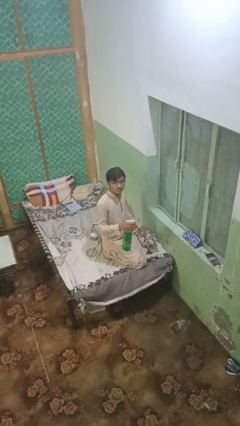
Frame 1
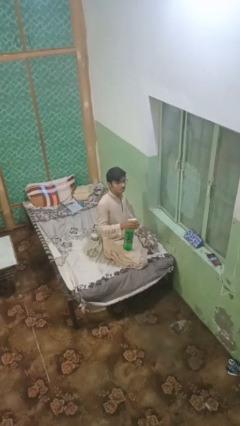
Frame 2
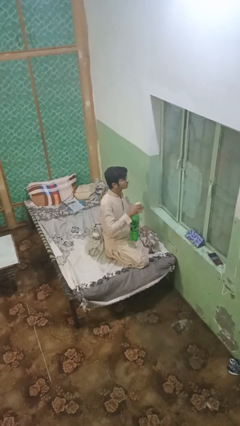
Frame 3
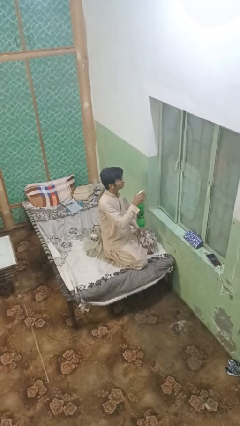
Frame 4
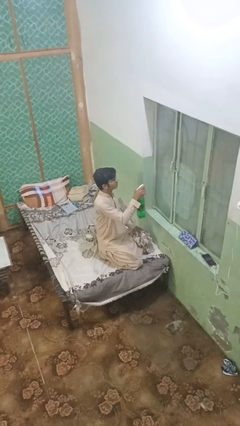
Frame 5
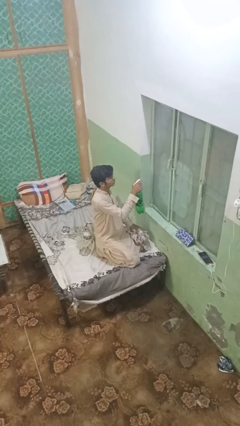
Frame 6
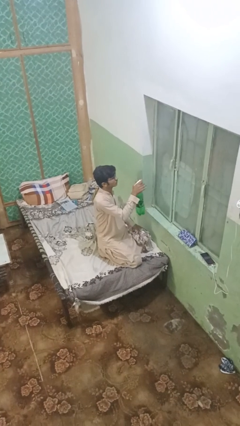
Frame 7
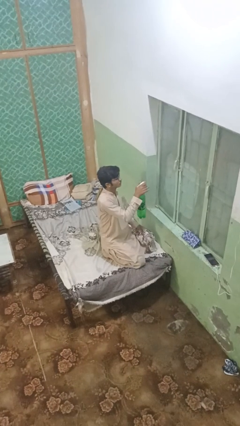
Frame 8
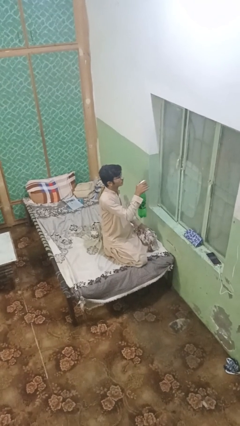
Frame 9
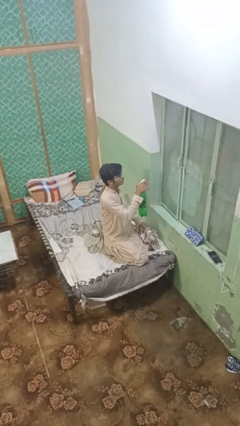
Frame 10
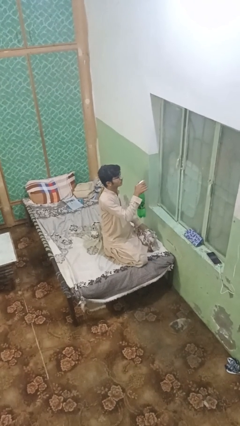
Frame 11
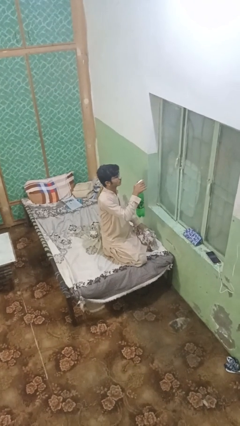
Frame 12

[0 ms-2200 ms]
person sprays from bottle

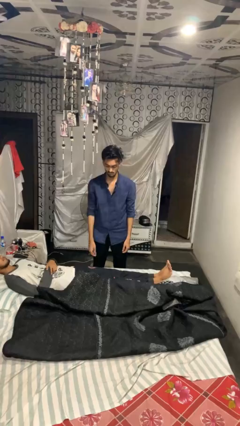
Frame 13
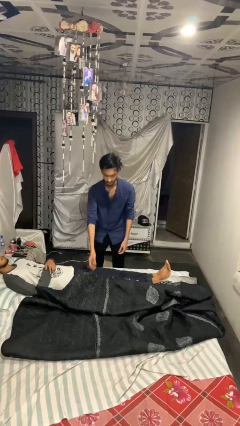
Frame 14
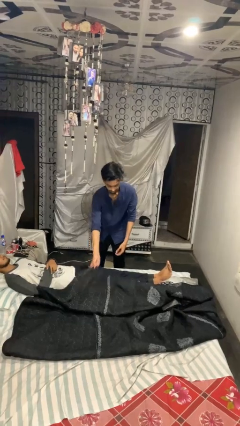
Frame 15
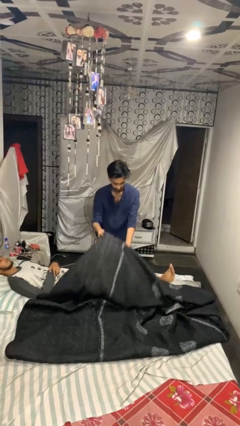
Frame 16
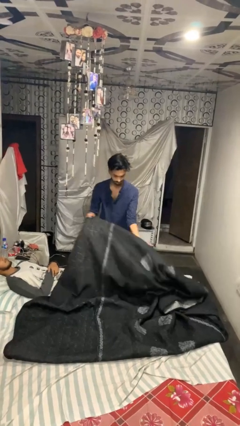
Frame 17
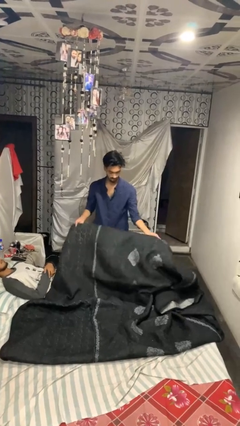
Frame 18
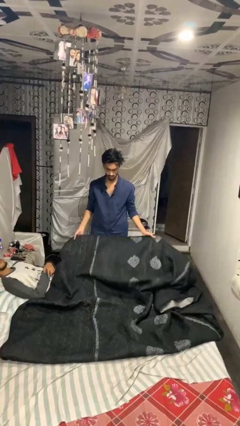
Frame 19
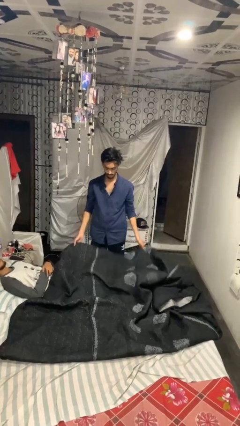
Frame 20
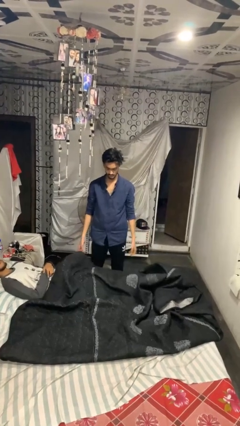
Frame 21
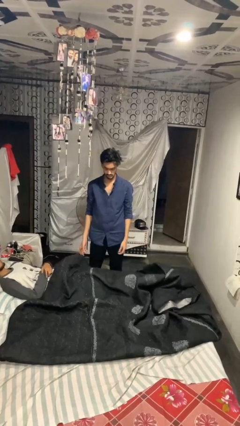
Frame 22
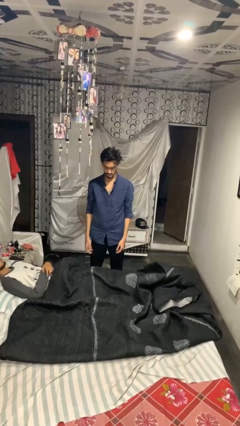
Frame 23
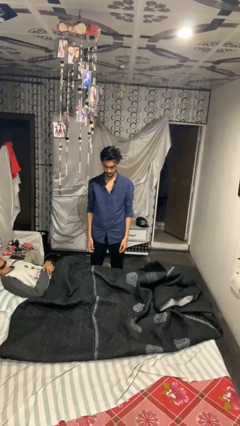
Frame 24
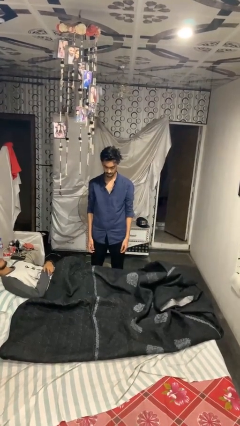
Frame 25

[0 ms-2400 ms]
person covers friend with blanket

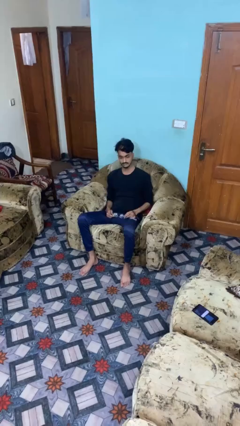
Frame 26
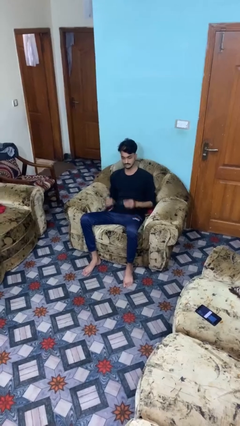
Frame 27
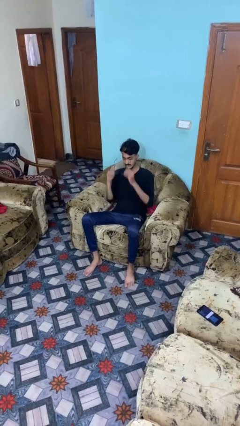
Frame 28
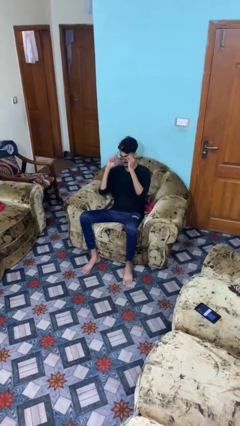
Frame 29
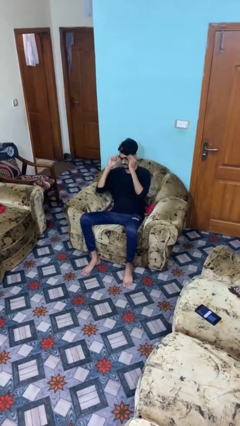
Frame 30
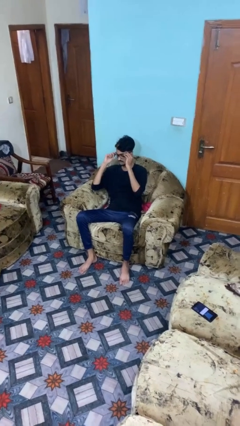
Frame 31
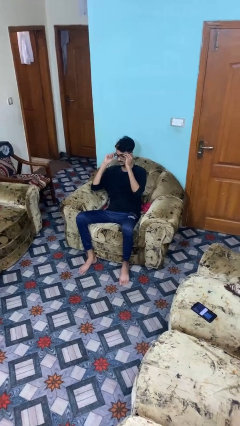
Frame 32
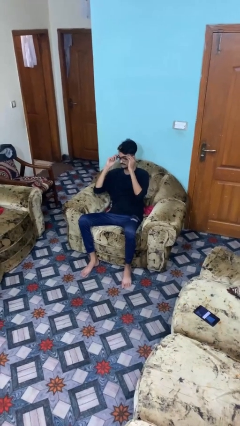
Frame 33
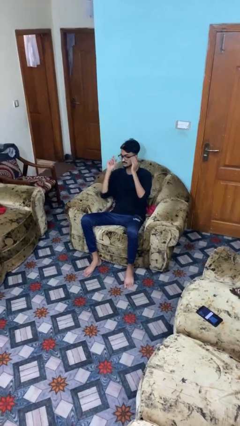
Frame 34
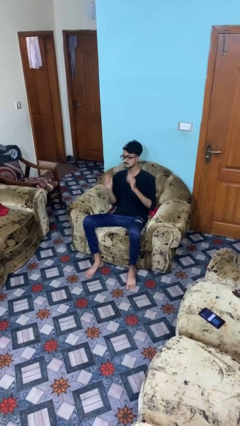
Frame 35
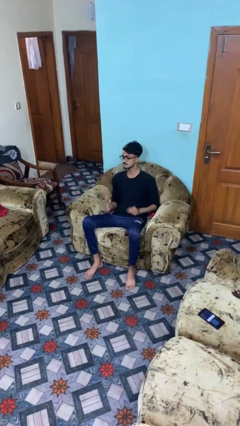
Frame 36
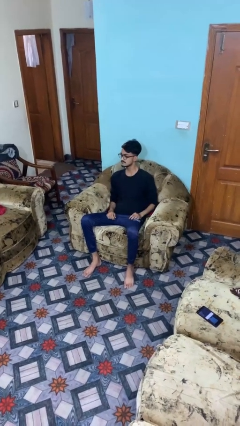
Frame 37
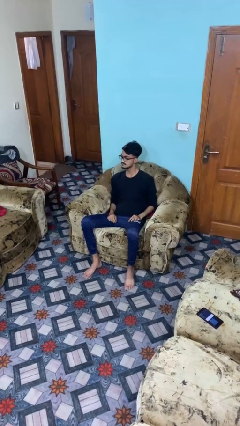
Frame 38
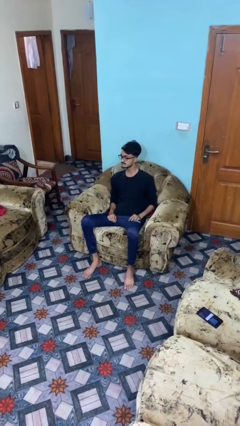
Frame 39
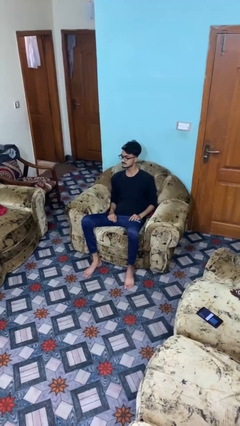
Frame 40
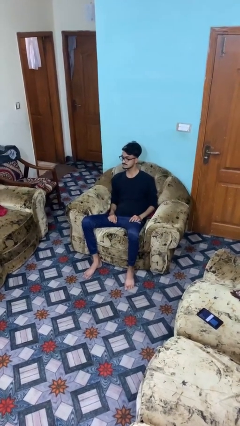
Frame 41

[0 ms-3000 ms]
person puts on glasses

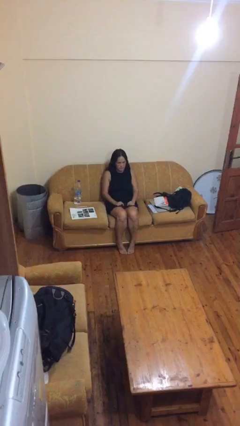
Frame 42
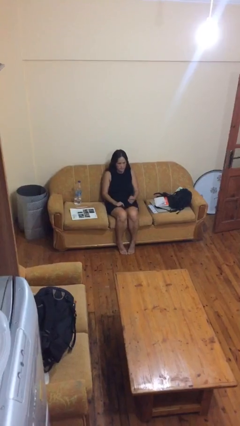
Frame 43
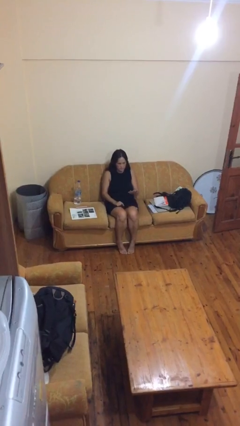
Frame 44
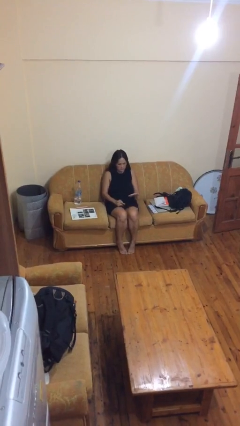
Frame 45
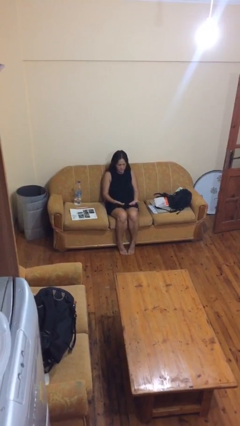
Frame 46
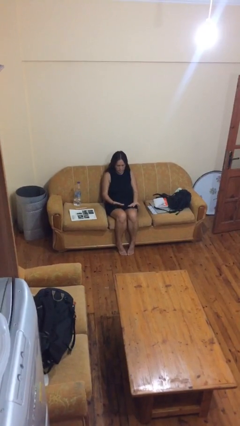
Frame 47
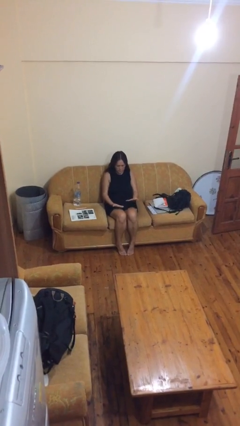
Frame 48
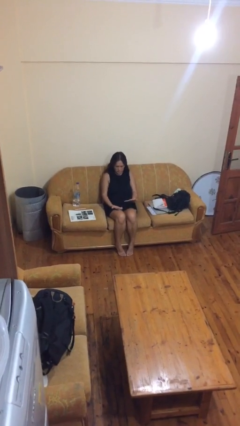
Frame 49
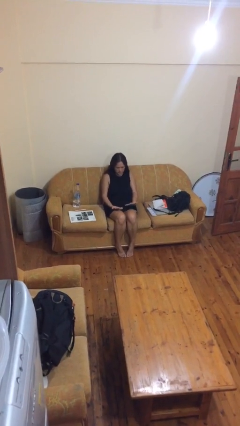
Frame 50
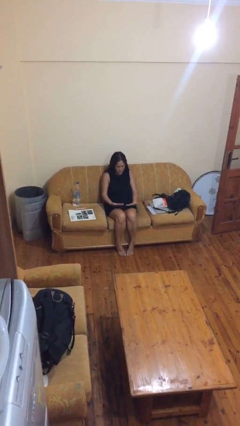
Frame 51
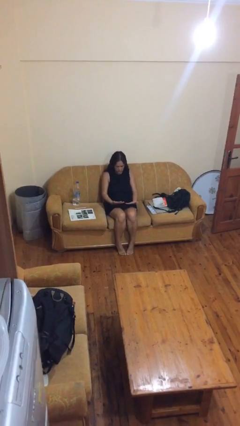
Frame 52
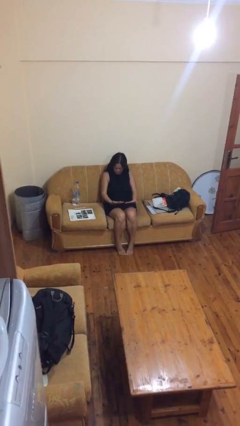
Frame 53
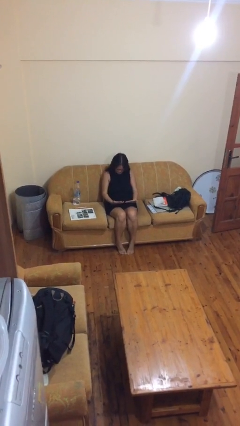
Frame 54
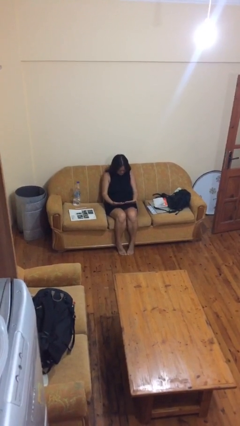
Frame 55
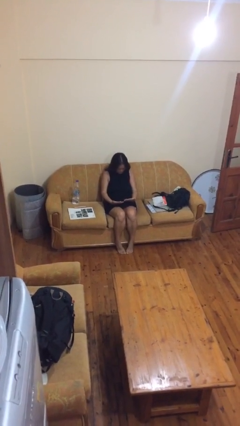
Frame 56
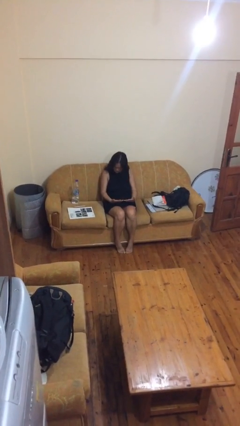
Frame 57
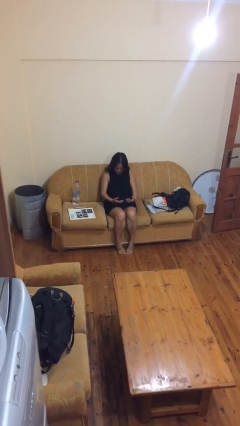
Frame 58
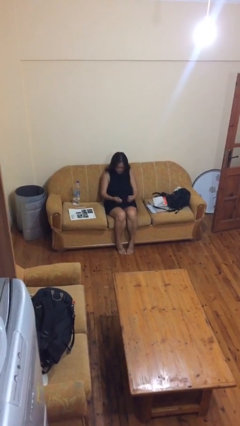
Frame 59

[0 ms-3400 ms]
person looks at hands in lap

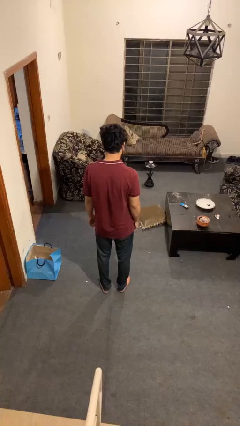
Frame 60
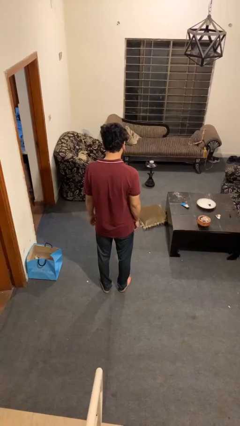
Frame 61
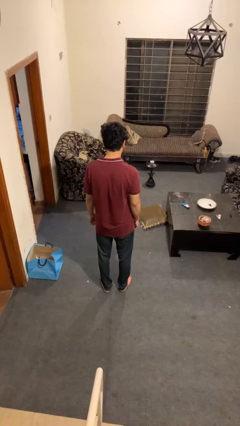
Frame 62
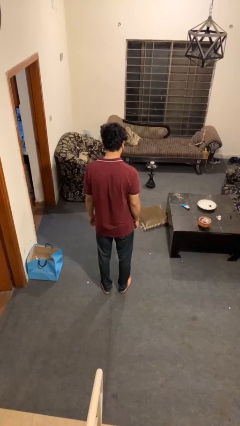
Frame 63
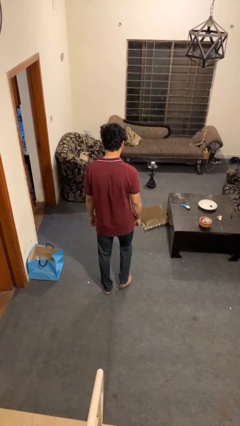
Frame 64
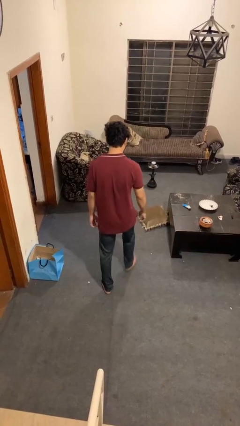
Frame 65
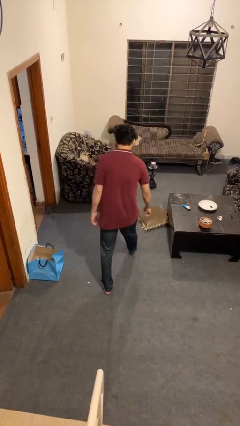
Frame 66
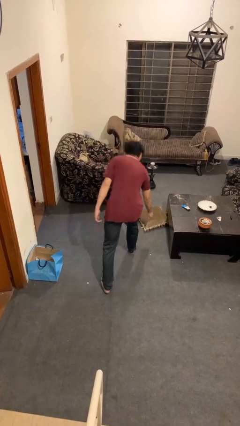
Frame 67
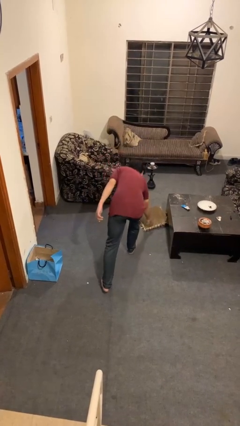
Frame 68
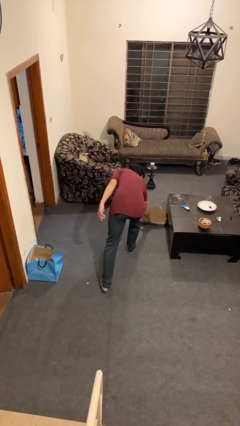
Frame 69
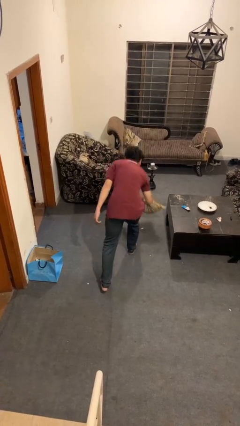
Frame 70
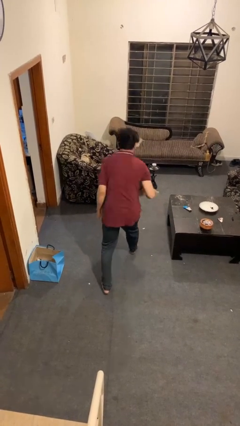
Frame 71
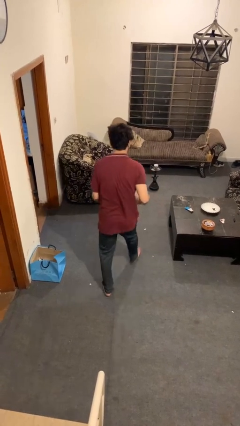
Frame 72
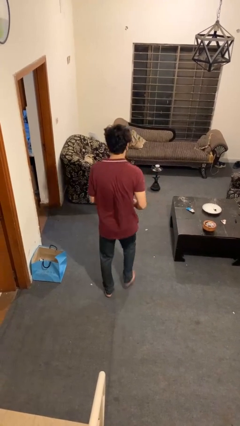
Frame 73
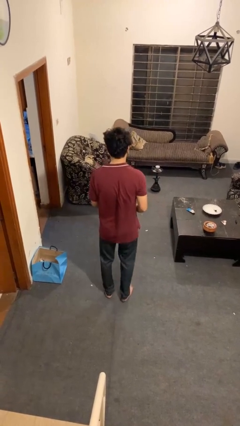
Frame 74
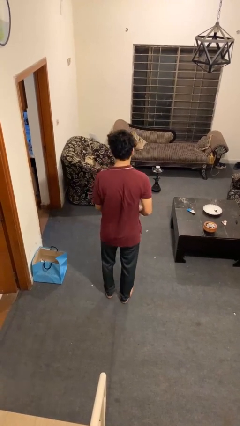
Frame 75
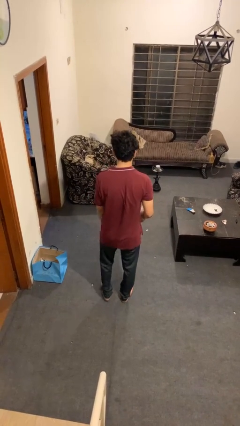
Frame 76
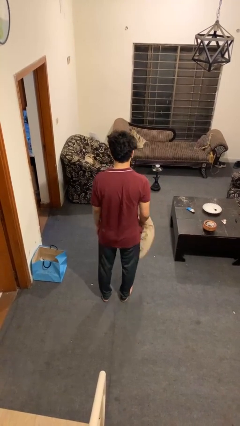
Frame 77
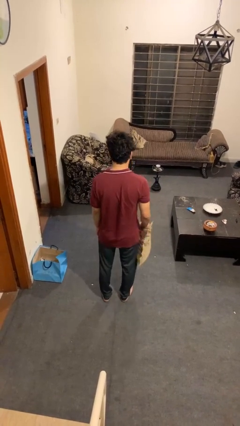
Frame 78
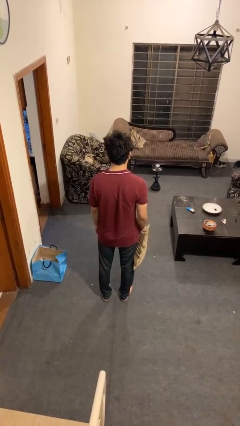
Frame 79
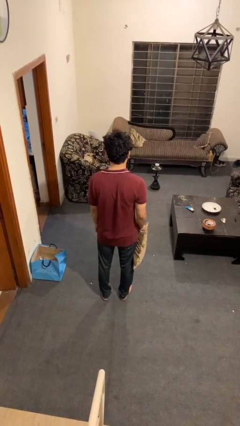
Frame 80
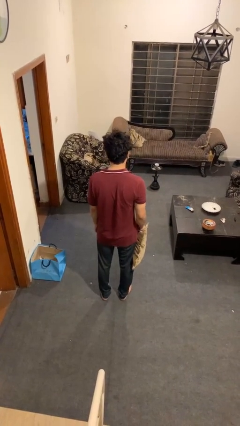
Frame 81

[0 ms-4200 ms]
person picks up object from floor

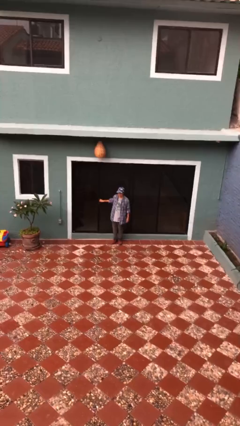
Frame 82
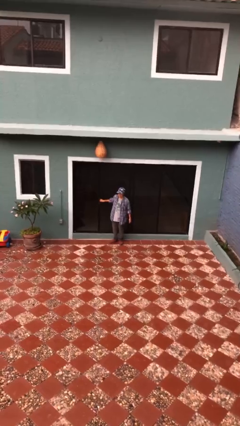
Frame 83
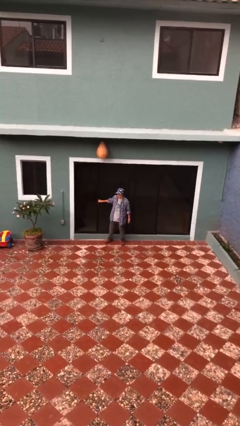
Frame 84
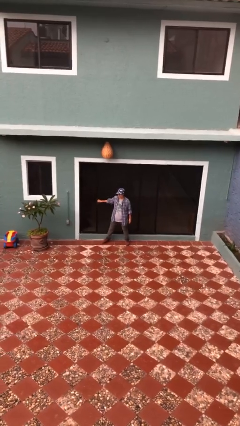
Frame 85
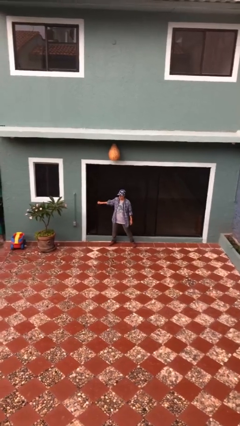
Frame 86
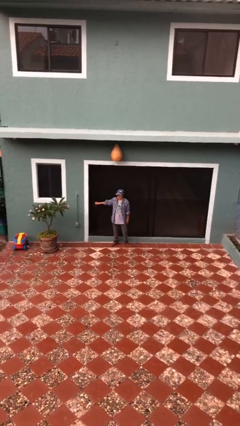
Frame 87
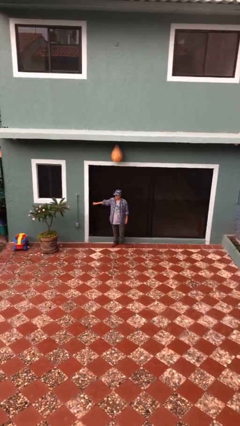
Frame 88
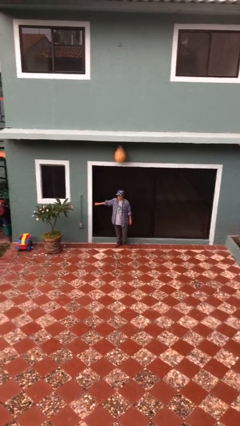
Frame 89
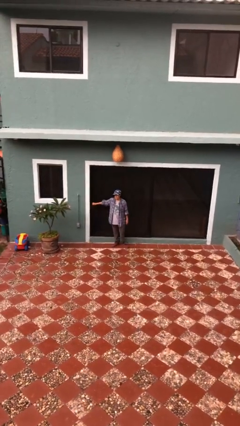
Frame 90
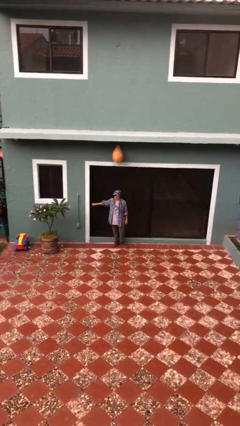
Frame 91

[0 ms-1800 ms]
person closes sliding door

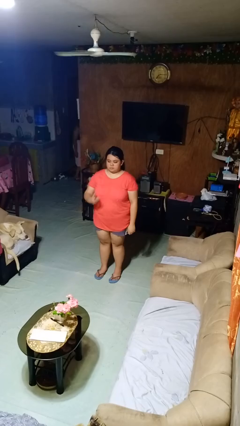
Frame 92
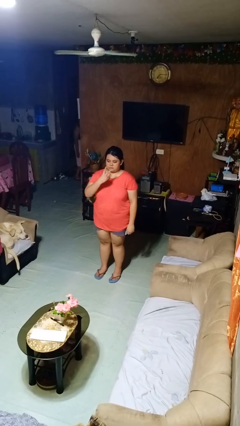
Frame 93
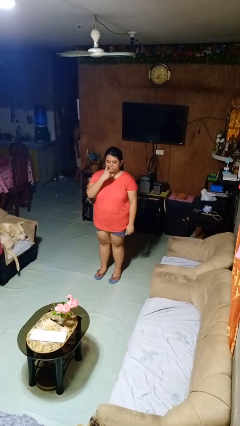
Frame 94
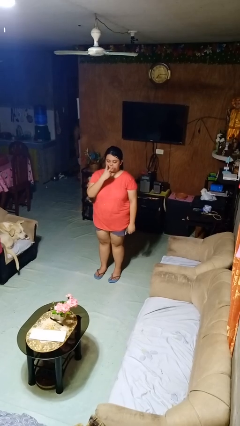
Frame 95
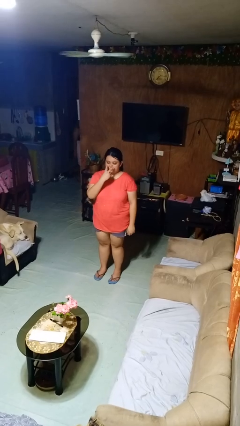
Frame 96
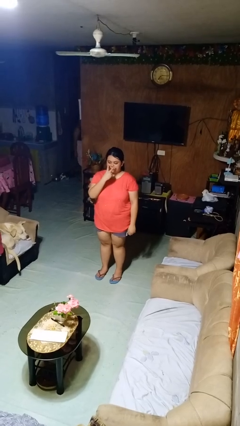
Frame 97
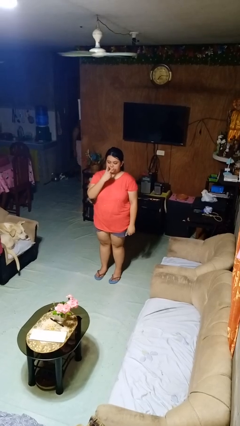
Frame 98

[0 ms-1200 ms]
person gestures watch closely
